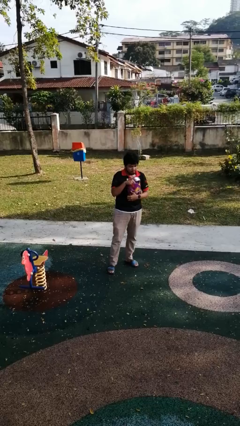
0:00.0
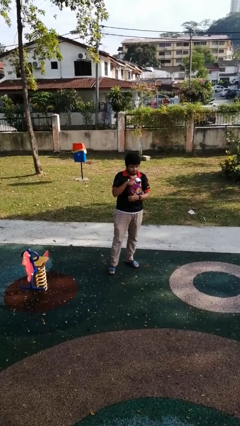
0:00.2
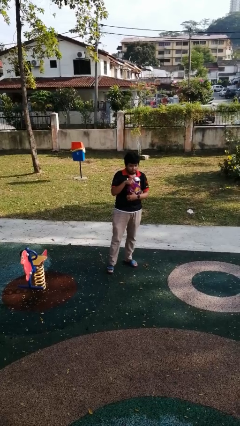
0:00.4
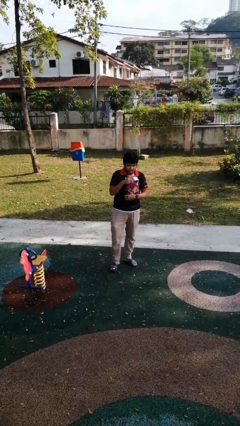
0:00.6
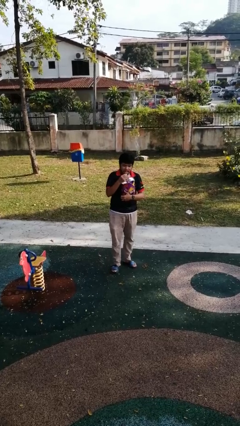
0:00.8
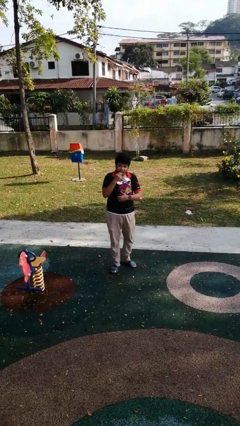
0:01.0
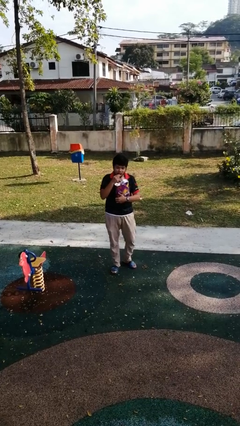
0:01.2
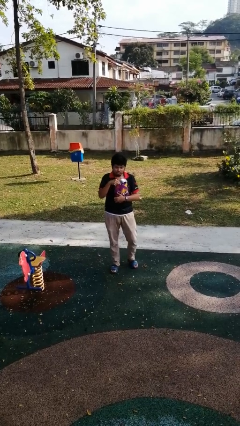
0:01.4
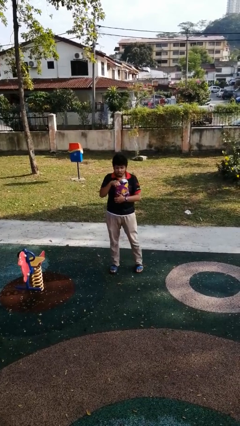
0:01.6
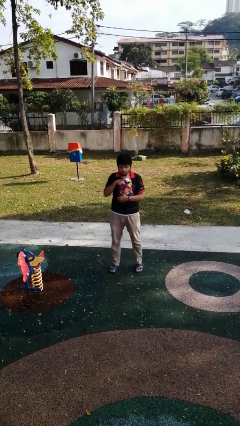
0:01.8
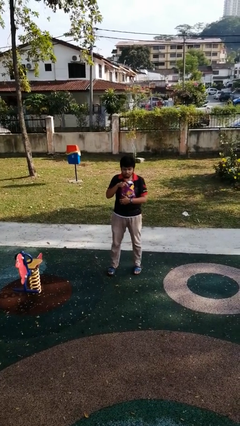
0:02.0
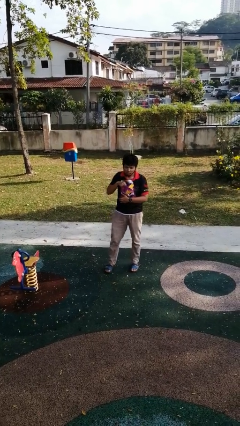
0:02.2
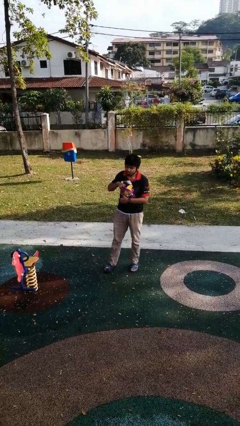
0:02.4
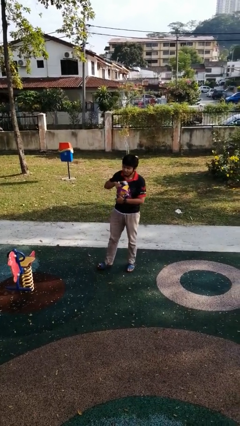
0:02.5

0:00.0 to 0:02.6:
person eats snack from bag

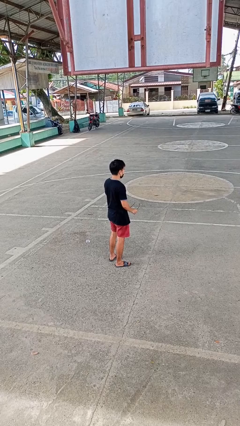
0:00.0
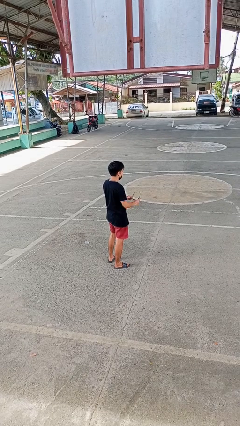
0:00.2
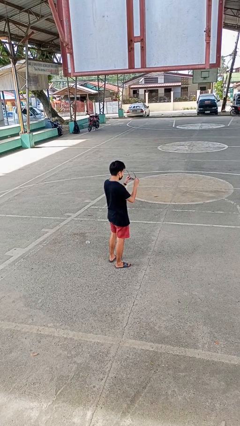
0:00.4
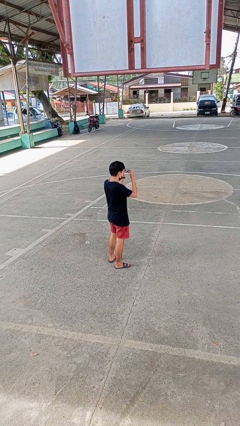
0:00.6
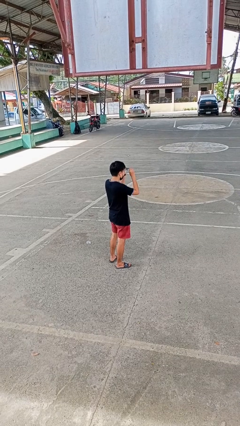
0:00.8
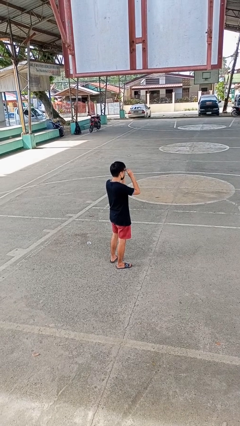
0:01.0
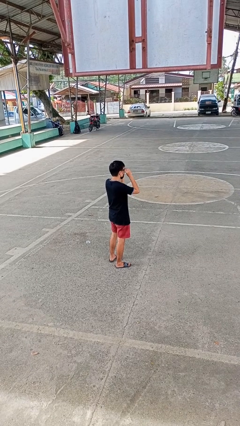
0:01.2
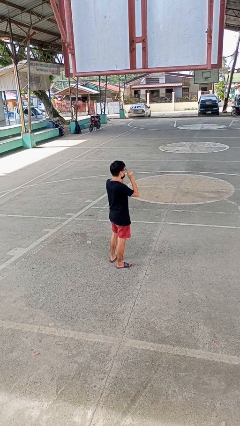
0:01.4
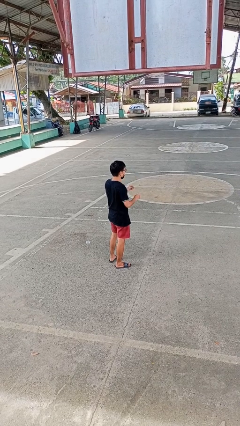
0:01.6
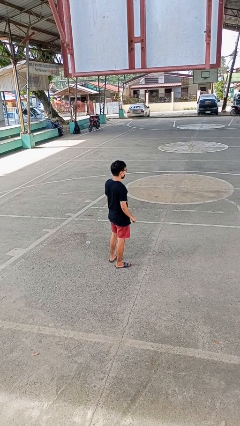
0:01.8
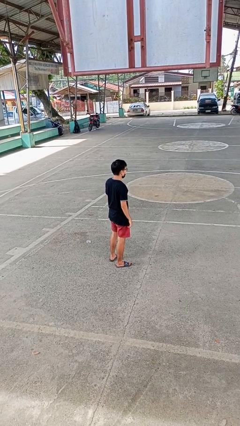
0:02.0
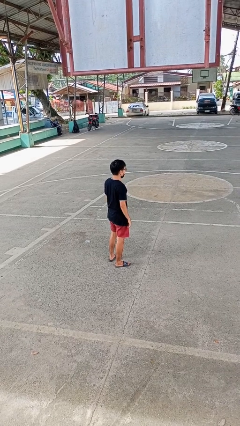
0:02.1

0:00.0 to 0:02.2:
person puts on glasses

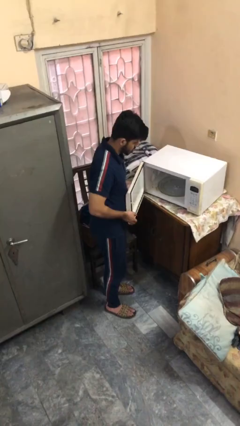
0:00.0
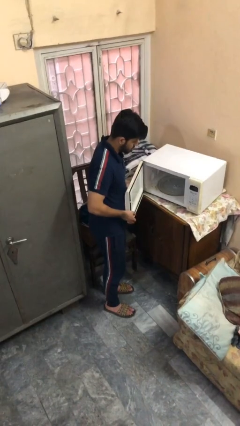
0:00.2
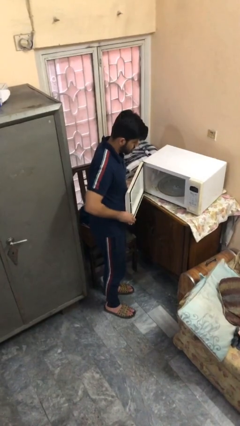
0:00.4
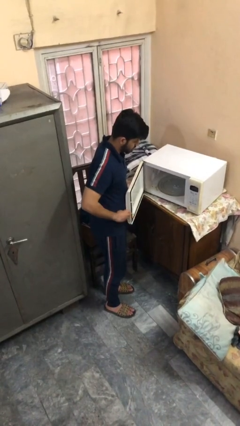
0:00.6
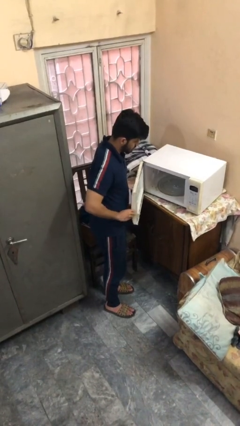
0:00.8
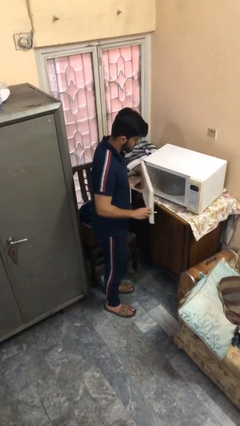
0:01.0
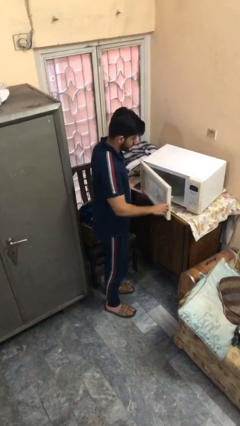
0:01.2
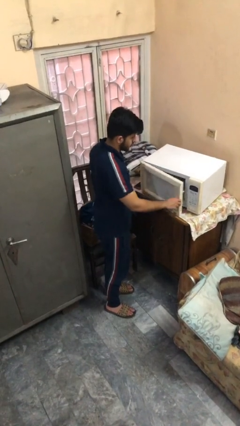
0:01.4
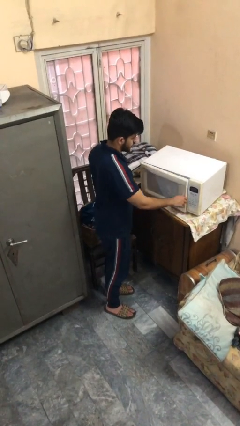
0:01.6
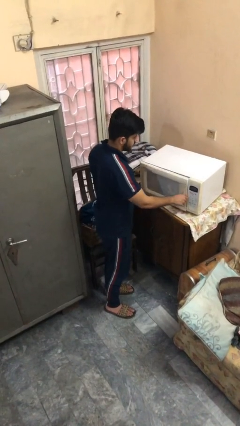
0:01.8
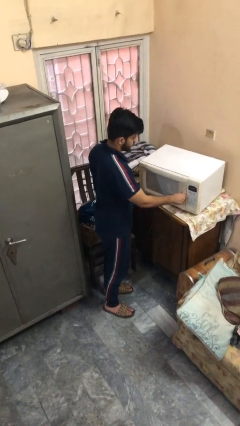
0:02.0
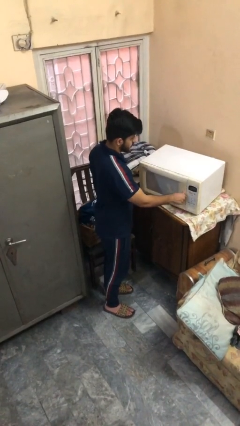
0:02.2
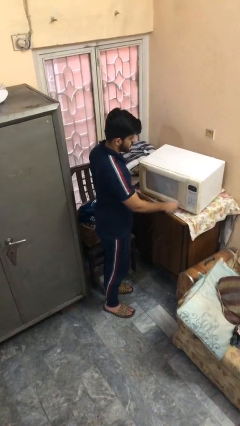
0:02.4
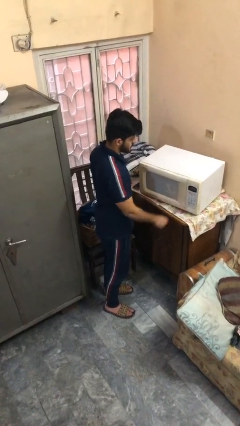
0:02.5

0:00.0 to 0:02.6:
person closes microwave

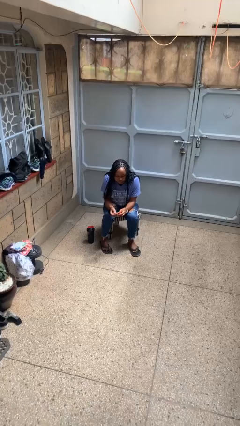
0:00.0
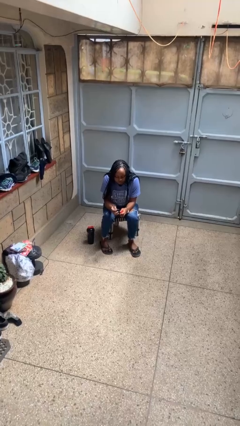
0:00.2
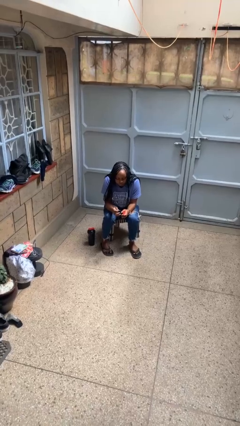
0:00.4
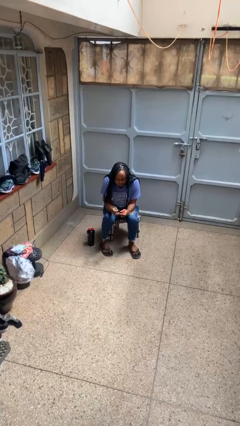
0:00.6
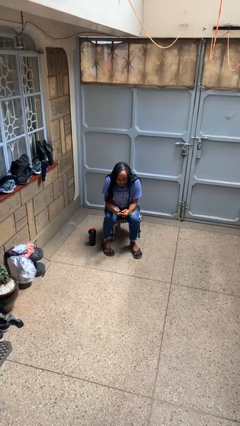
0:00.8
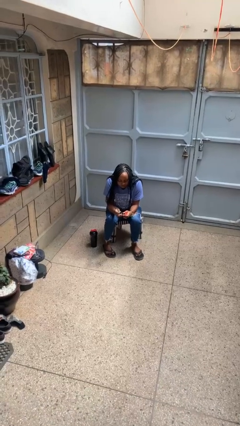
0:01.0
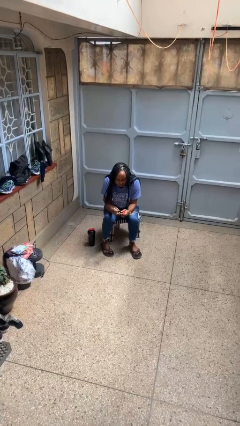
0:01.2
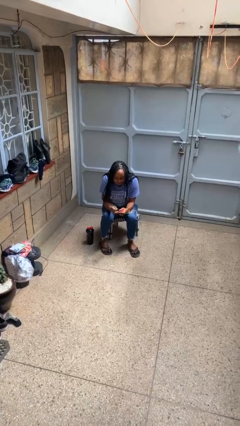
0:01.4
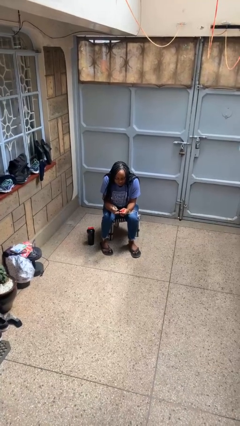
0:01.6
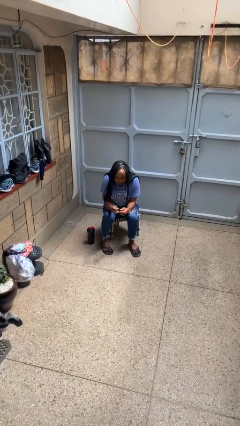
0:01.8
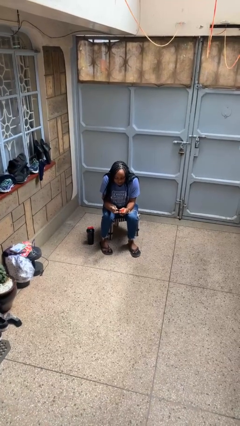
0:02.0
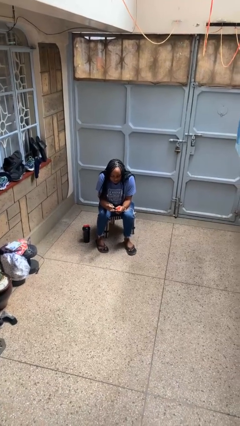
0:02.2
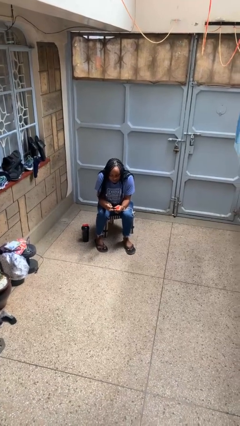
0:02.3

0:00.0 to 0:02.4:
person paints fingernails

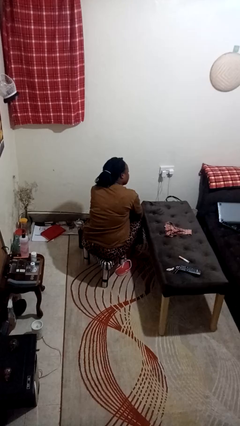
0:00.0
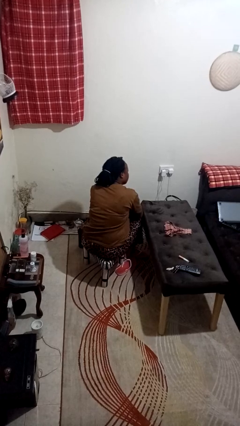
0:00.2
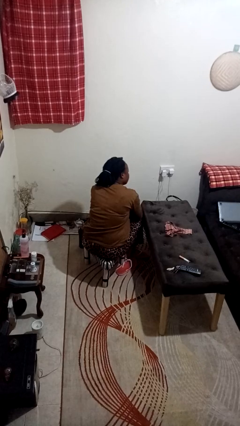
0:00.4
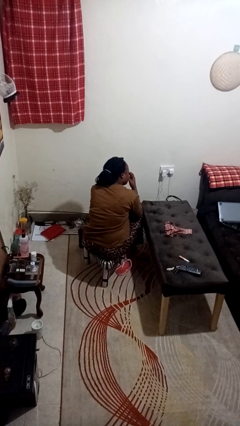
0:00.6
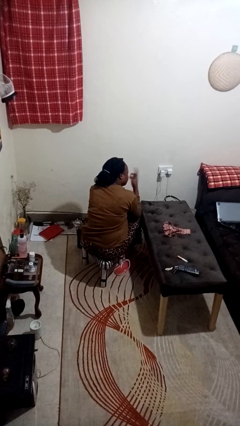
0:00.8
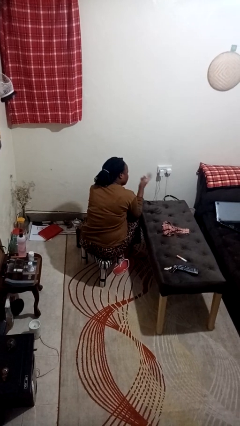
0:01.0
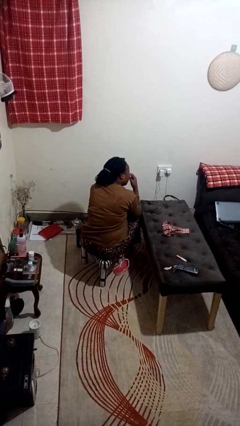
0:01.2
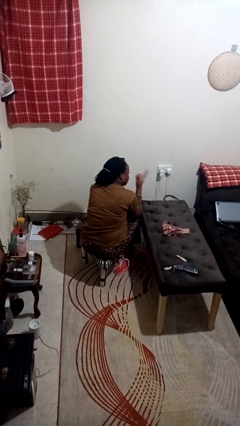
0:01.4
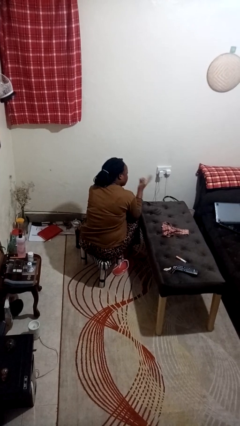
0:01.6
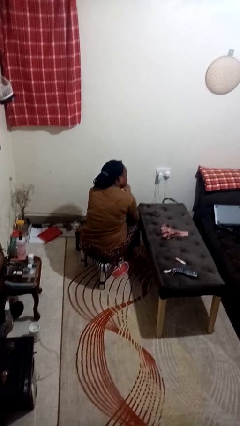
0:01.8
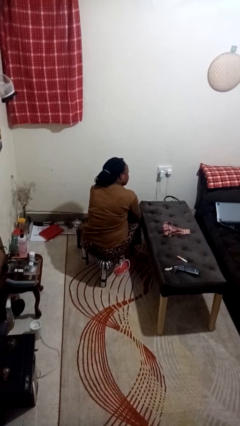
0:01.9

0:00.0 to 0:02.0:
person gestures watch closely

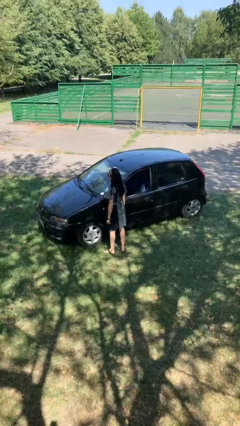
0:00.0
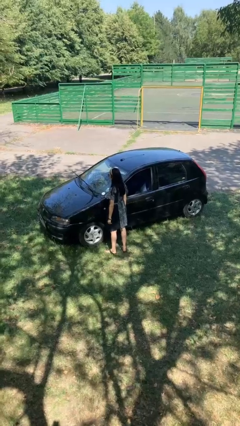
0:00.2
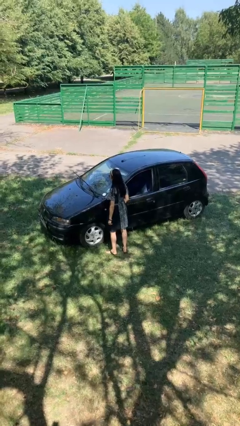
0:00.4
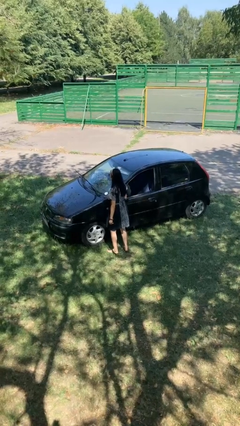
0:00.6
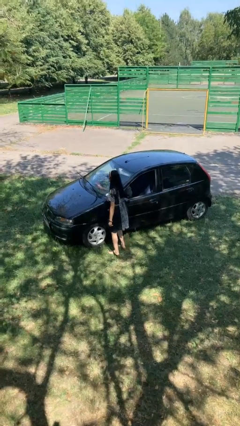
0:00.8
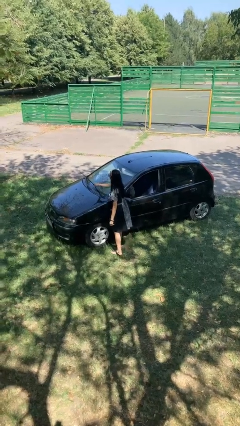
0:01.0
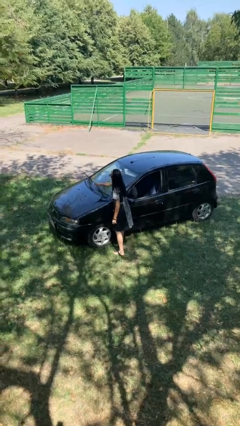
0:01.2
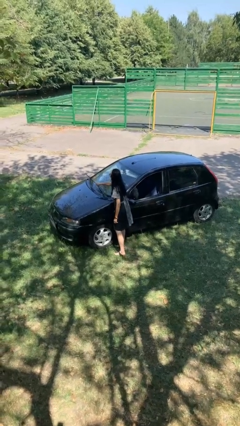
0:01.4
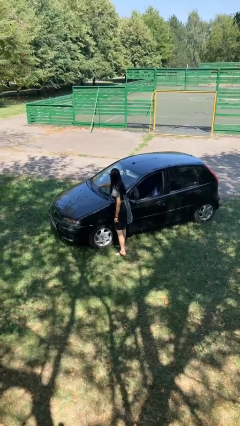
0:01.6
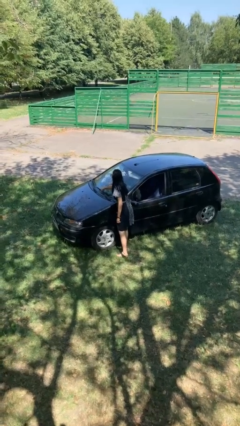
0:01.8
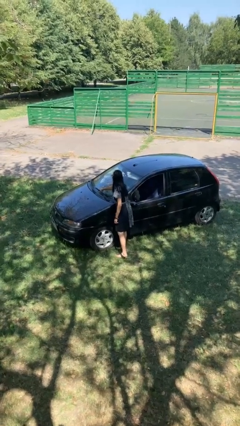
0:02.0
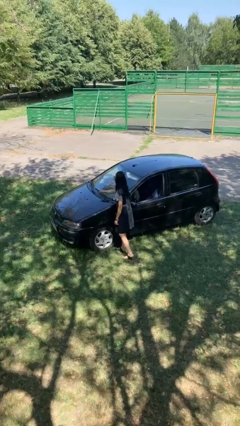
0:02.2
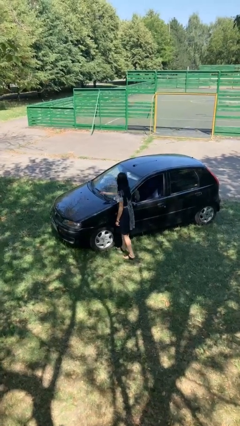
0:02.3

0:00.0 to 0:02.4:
person flips down car wipers

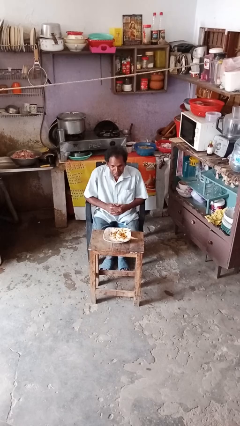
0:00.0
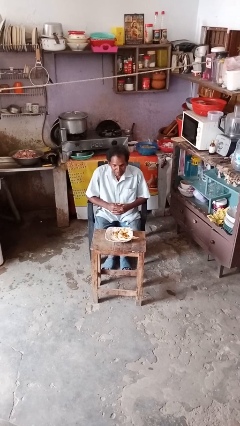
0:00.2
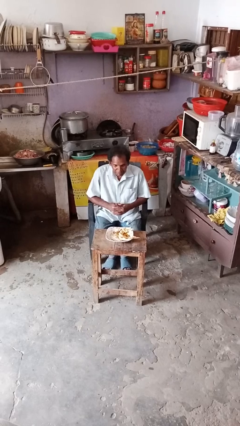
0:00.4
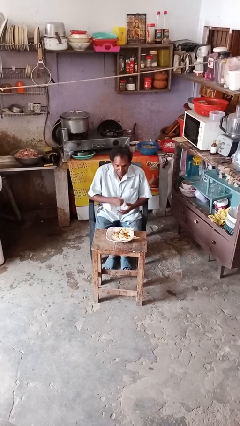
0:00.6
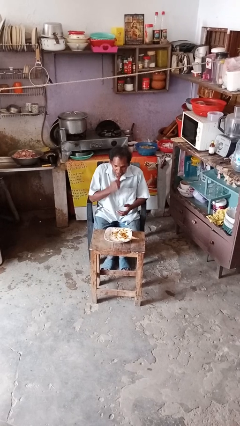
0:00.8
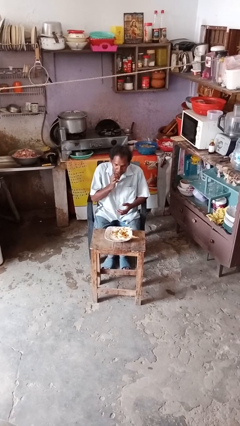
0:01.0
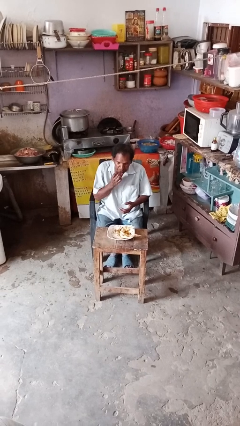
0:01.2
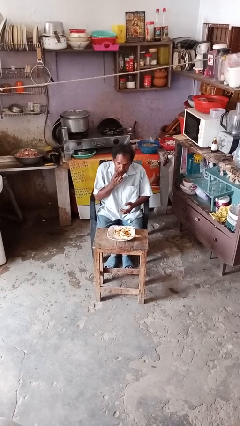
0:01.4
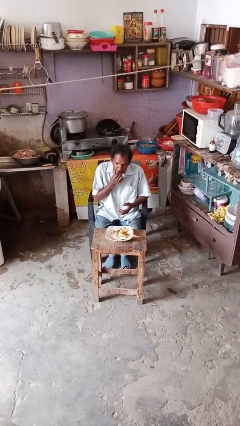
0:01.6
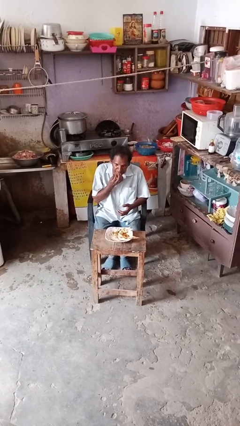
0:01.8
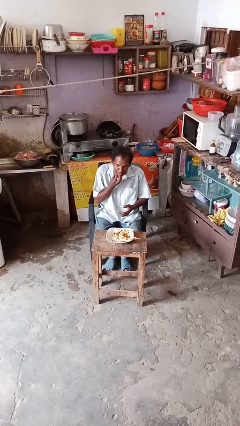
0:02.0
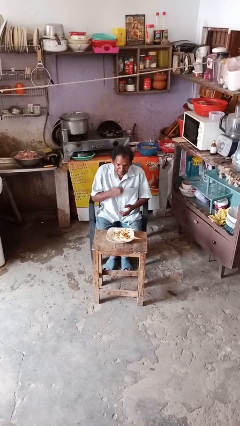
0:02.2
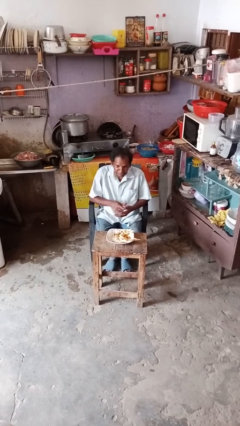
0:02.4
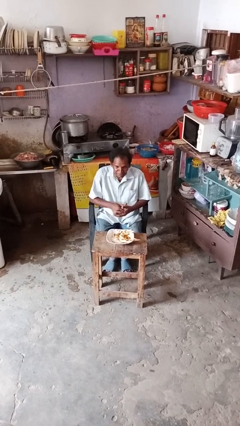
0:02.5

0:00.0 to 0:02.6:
person licks fingers
